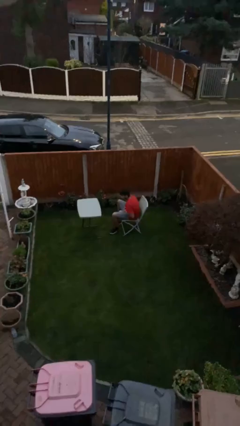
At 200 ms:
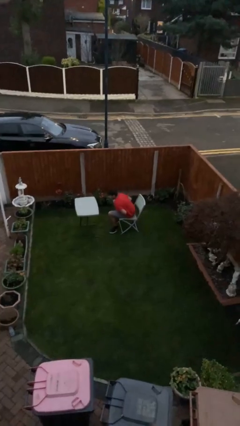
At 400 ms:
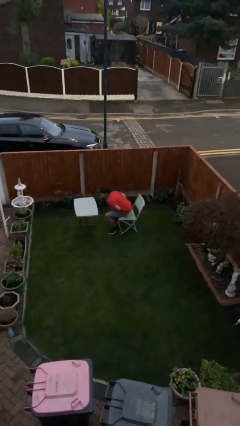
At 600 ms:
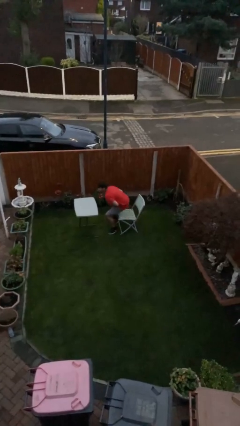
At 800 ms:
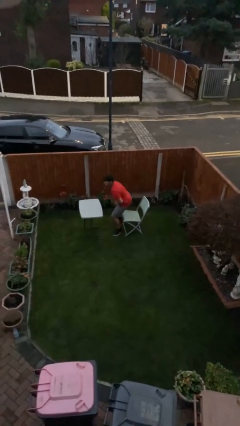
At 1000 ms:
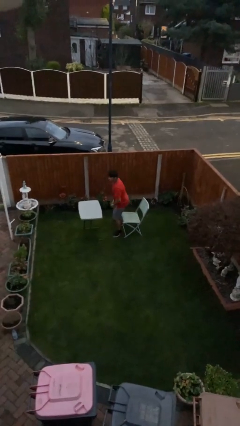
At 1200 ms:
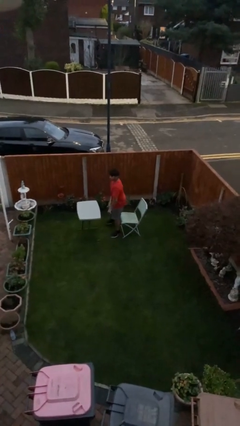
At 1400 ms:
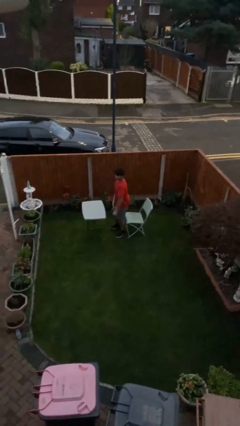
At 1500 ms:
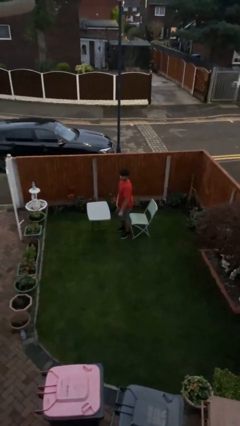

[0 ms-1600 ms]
person stands up

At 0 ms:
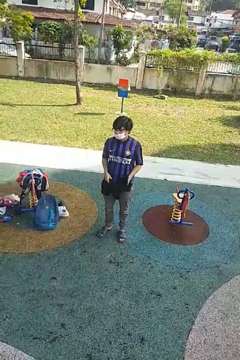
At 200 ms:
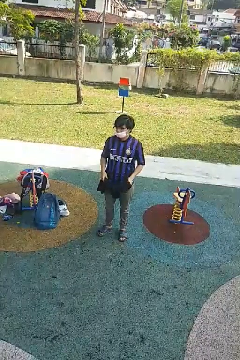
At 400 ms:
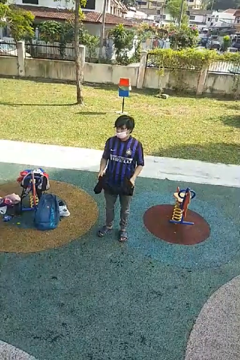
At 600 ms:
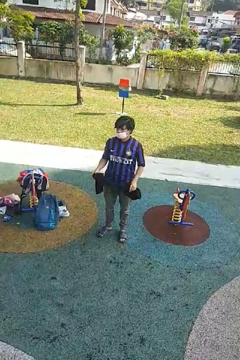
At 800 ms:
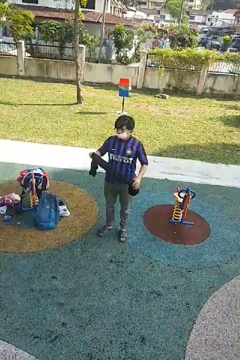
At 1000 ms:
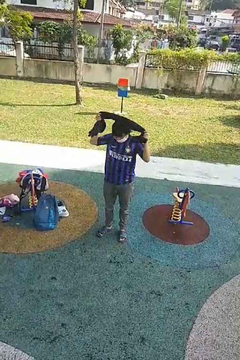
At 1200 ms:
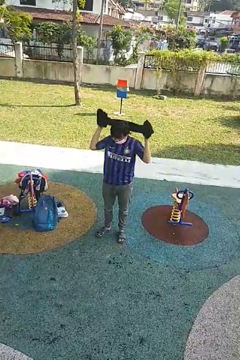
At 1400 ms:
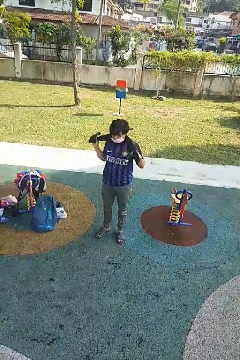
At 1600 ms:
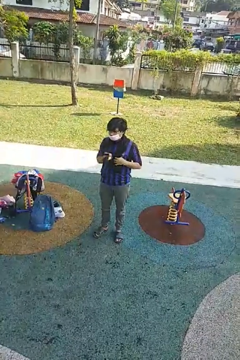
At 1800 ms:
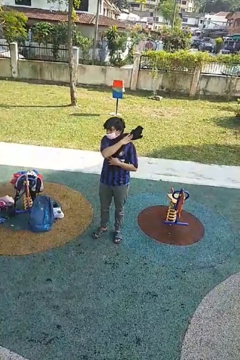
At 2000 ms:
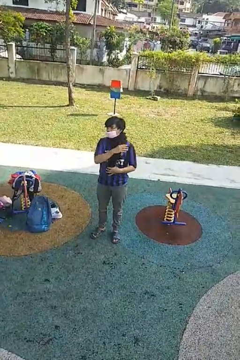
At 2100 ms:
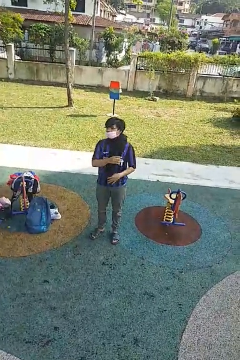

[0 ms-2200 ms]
person puts on scarf

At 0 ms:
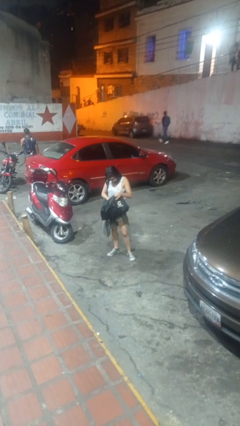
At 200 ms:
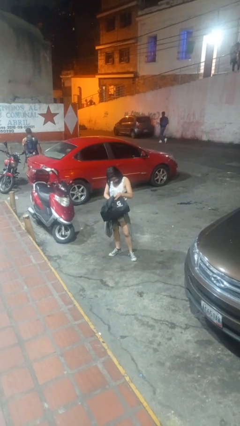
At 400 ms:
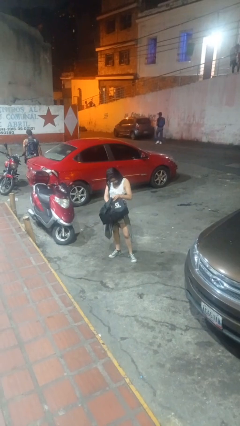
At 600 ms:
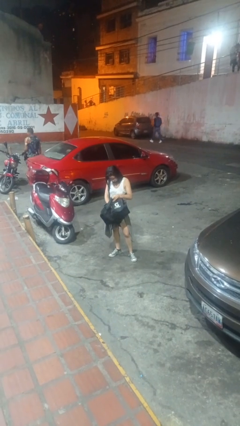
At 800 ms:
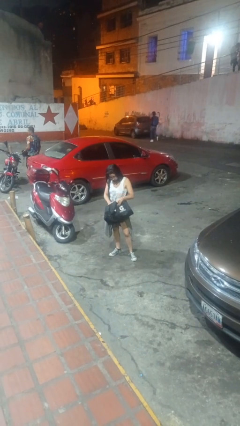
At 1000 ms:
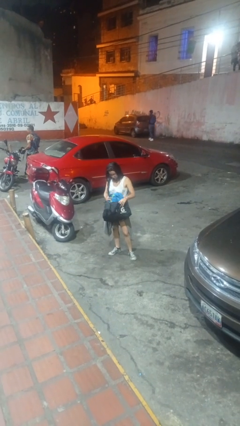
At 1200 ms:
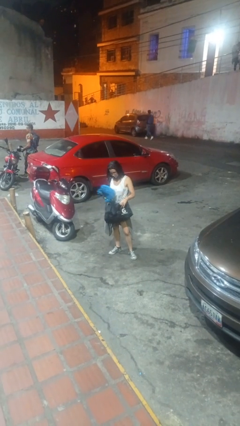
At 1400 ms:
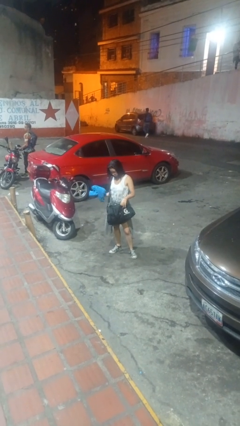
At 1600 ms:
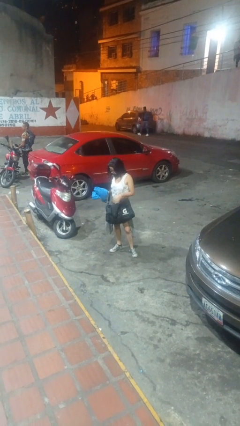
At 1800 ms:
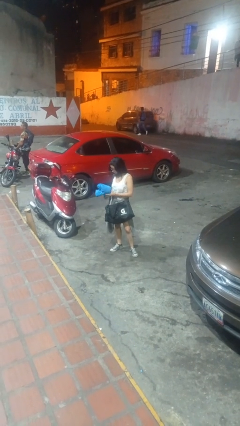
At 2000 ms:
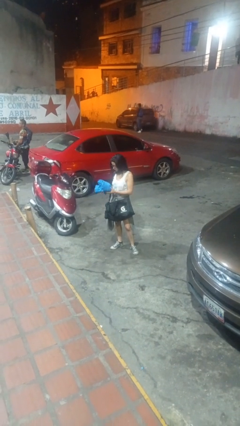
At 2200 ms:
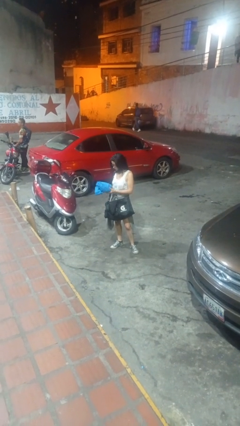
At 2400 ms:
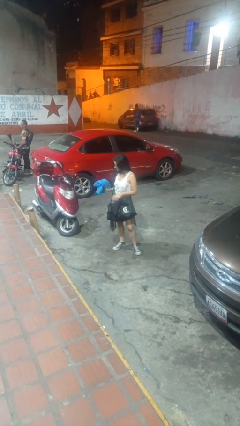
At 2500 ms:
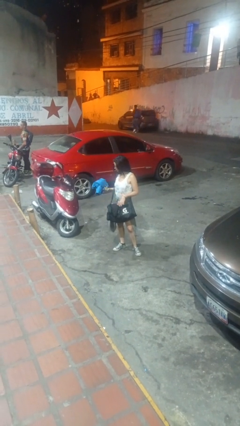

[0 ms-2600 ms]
person takes object from purse

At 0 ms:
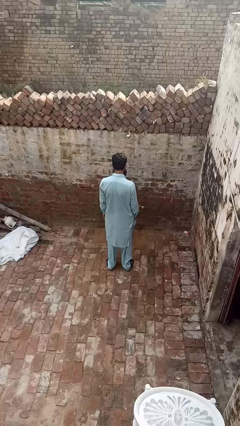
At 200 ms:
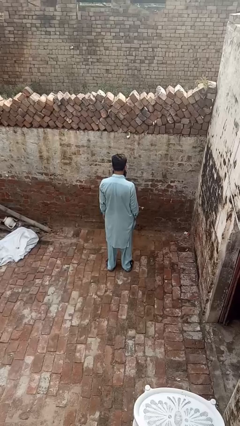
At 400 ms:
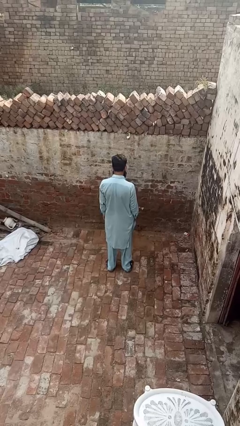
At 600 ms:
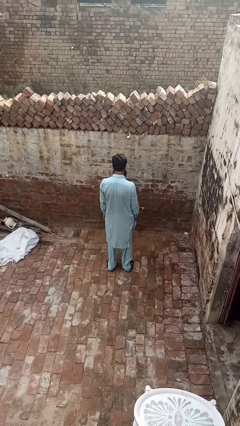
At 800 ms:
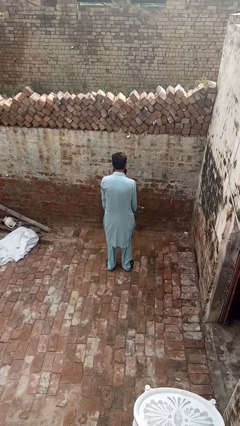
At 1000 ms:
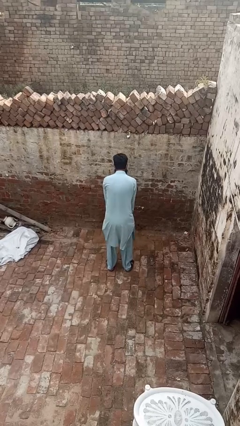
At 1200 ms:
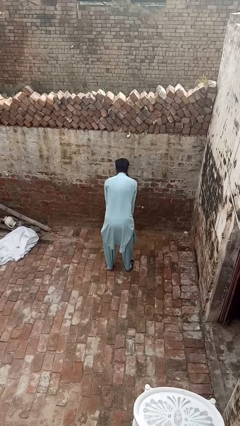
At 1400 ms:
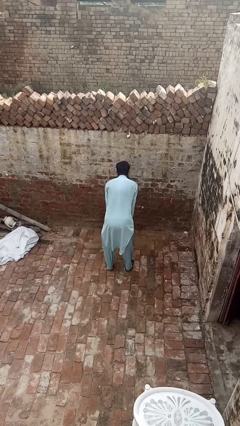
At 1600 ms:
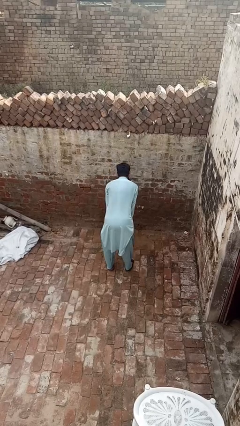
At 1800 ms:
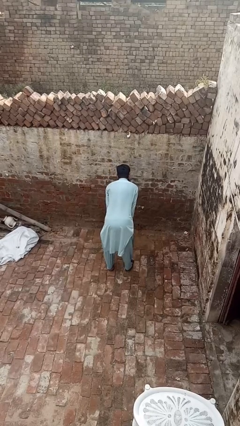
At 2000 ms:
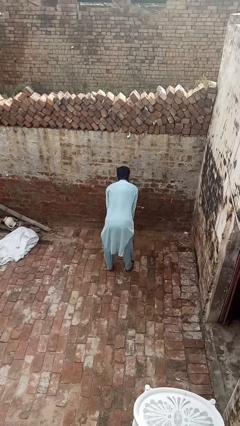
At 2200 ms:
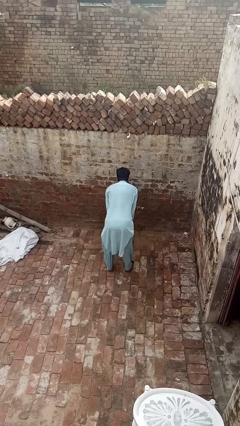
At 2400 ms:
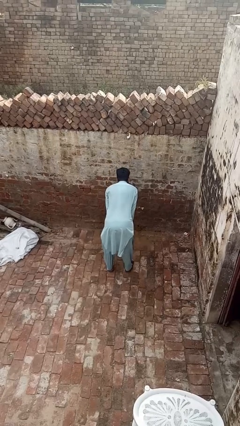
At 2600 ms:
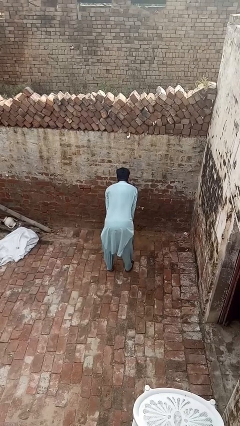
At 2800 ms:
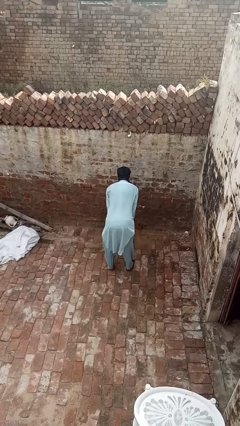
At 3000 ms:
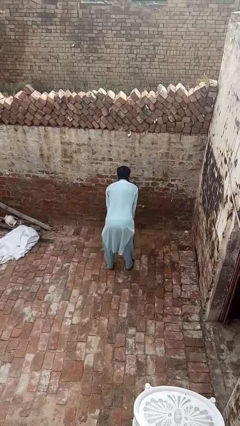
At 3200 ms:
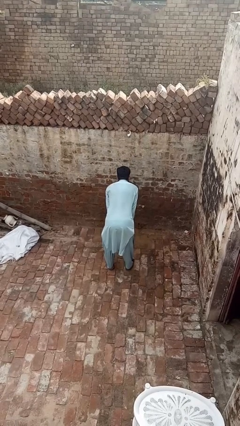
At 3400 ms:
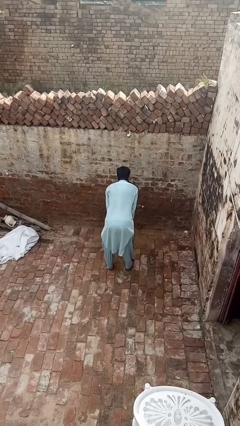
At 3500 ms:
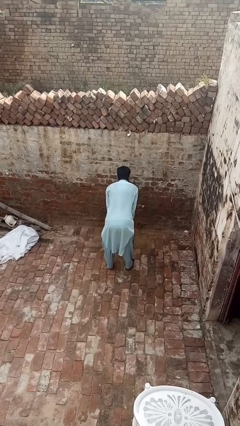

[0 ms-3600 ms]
person slaps hands on thighs

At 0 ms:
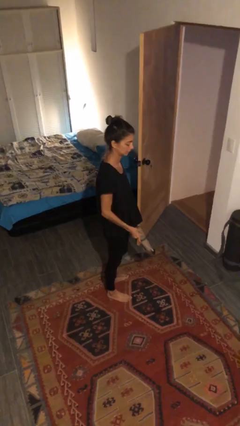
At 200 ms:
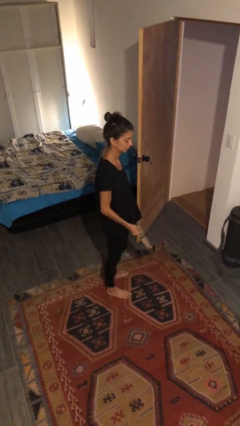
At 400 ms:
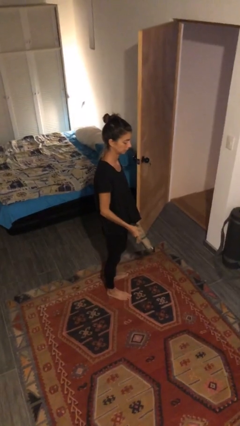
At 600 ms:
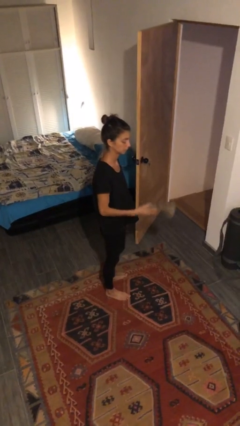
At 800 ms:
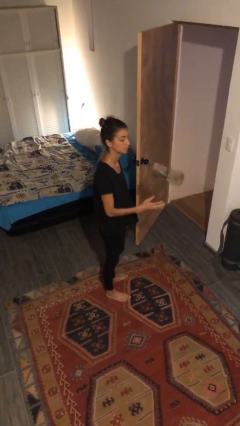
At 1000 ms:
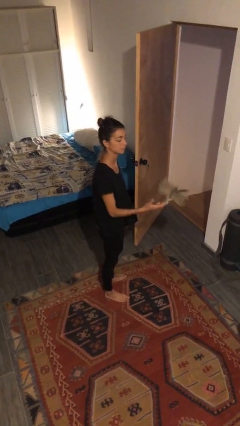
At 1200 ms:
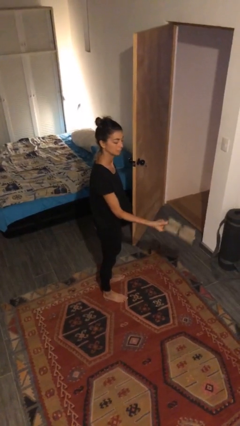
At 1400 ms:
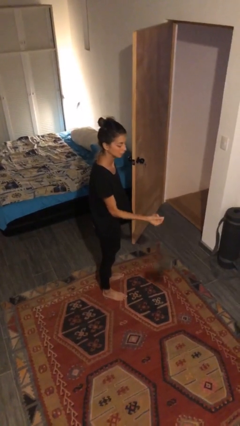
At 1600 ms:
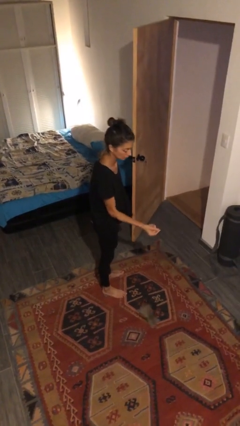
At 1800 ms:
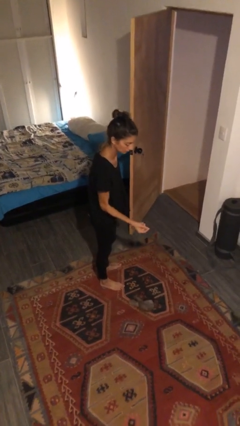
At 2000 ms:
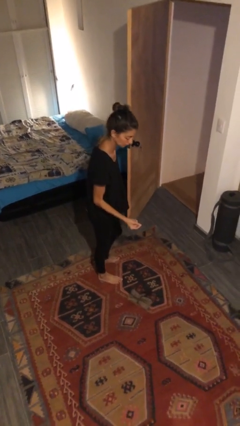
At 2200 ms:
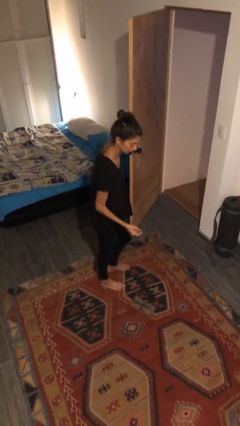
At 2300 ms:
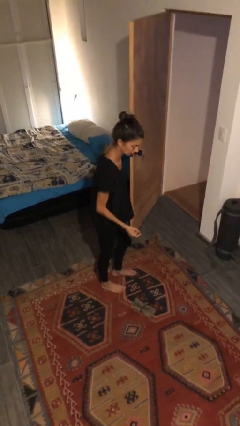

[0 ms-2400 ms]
person drops object

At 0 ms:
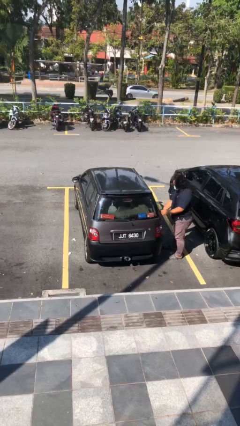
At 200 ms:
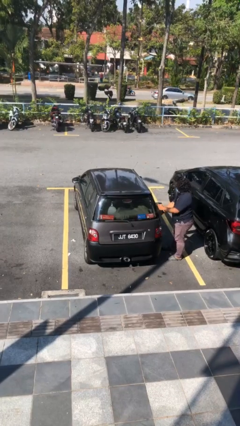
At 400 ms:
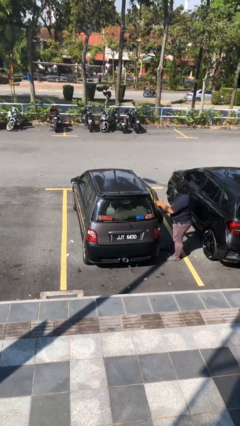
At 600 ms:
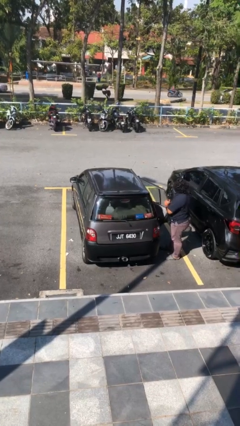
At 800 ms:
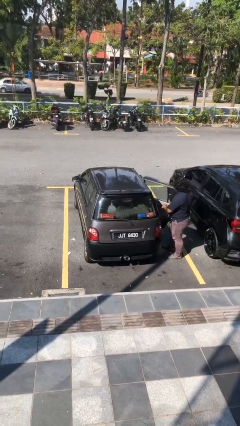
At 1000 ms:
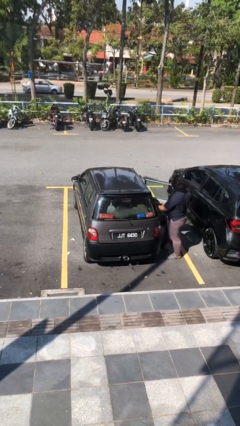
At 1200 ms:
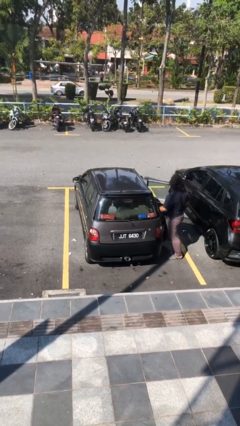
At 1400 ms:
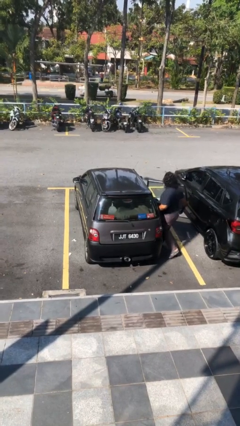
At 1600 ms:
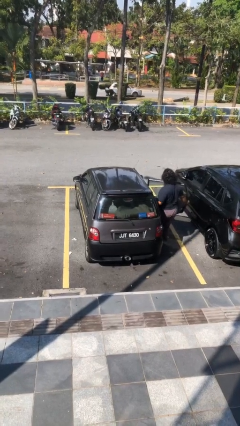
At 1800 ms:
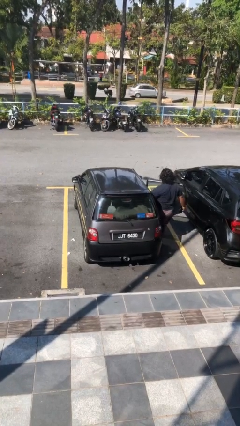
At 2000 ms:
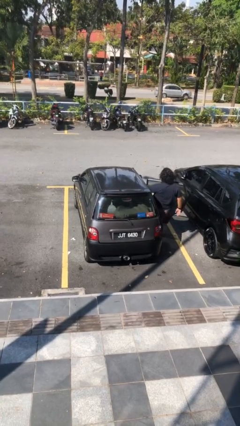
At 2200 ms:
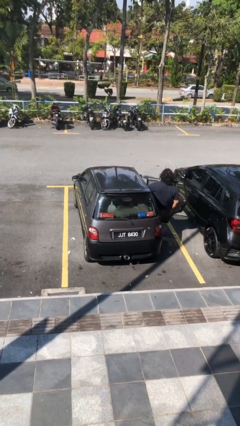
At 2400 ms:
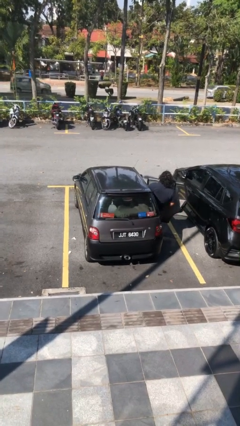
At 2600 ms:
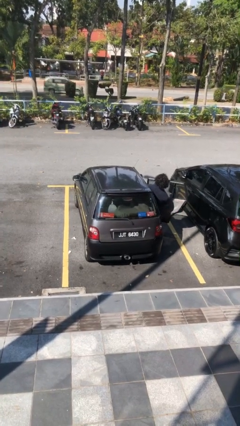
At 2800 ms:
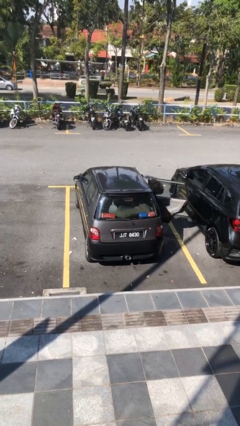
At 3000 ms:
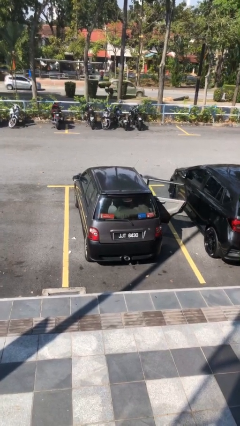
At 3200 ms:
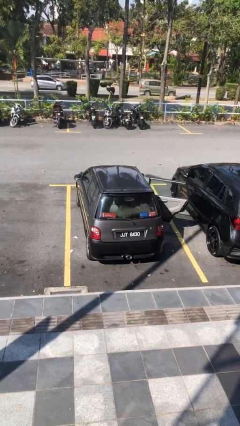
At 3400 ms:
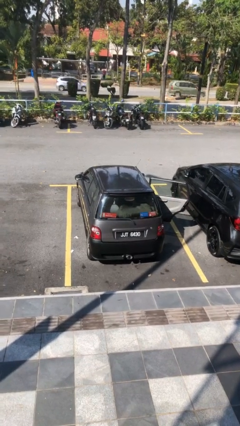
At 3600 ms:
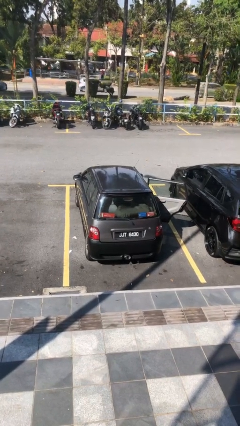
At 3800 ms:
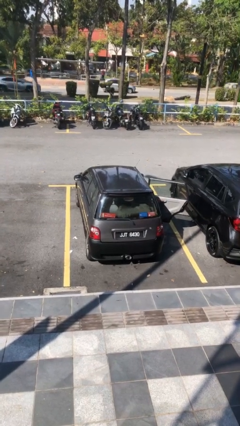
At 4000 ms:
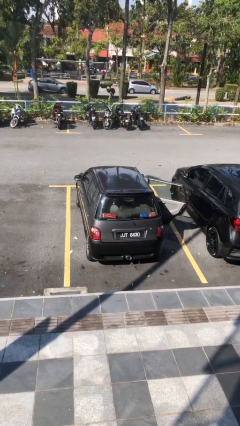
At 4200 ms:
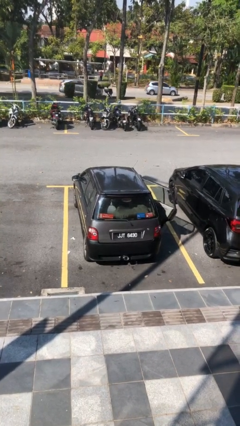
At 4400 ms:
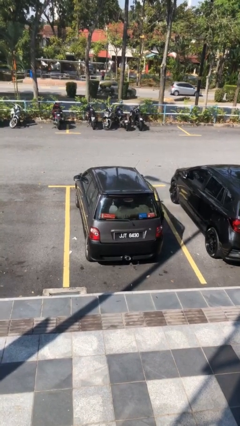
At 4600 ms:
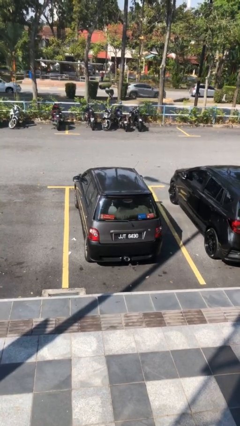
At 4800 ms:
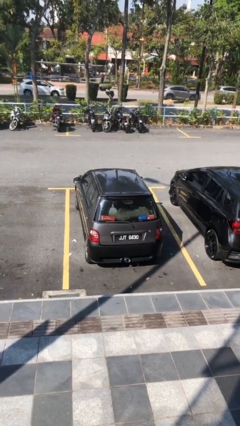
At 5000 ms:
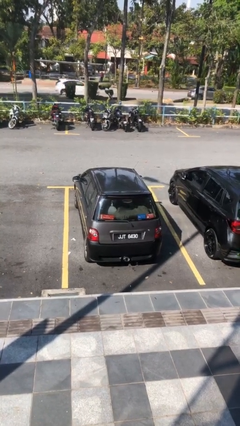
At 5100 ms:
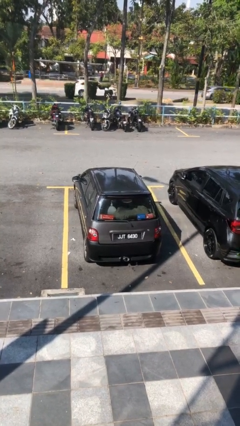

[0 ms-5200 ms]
car picks up person
